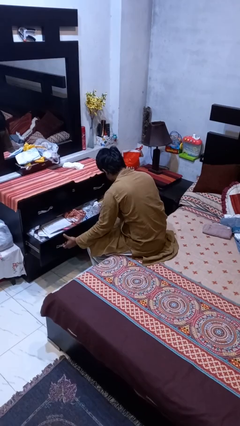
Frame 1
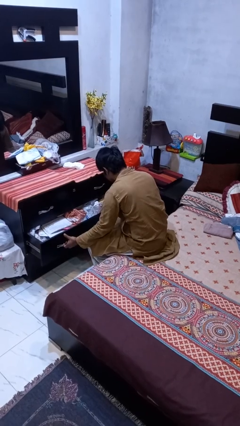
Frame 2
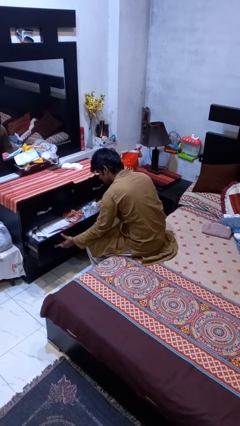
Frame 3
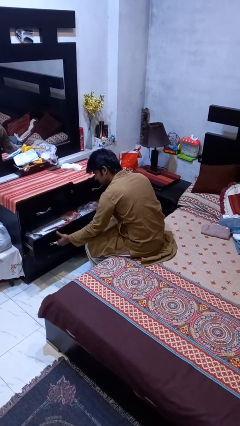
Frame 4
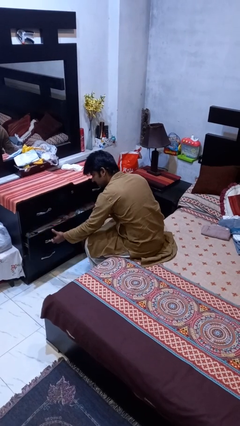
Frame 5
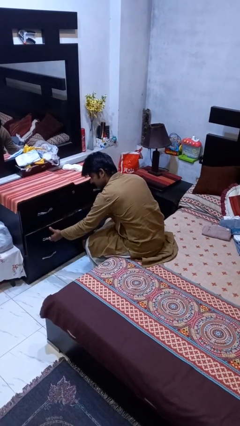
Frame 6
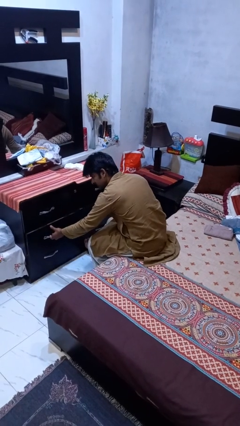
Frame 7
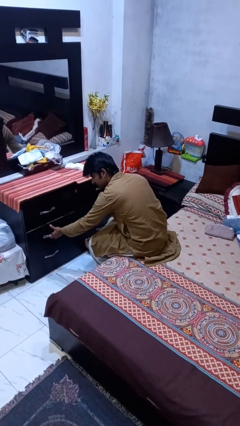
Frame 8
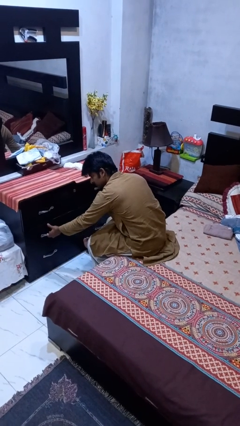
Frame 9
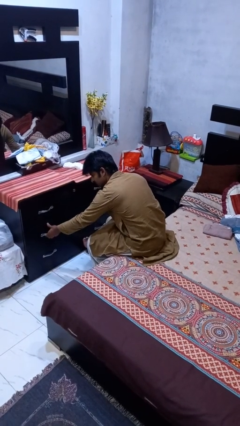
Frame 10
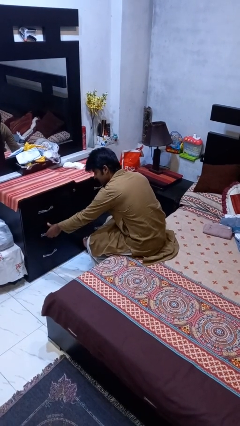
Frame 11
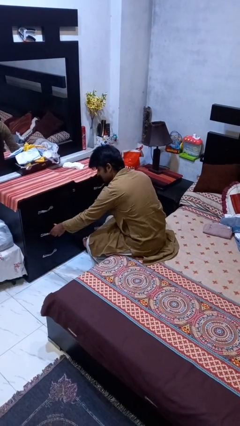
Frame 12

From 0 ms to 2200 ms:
person closes dresser drawer

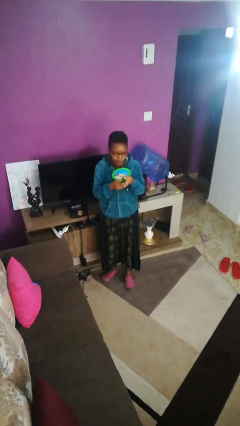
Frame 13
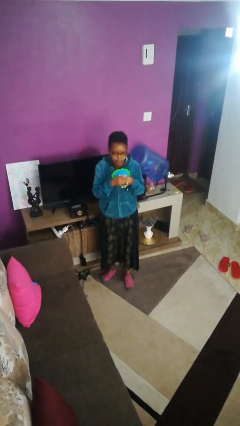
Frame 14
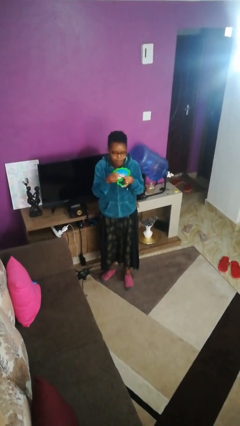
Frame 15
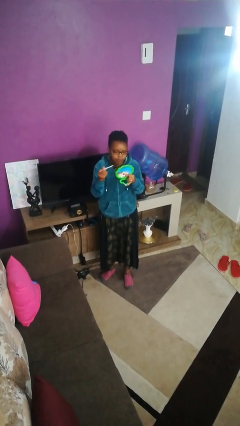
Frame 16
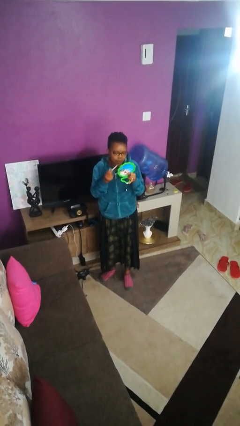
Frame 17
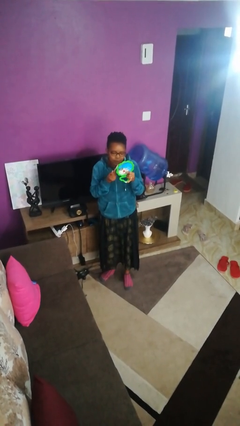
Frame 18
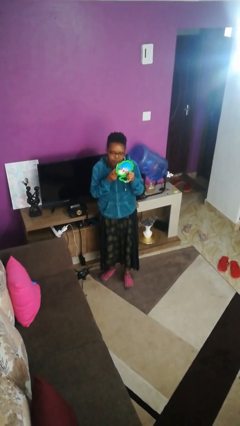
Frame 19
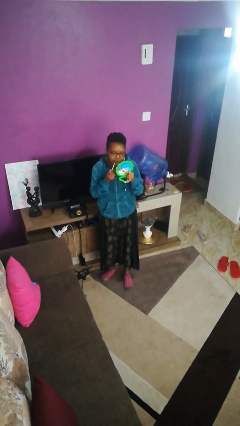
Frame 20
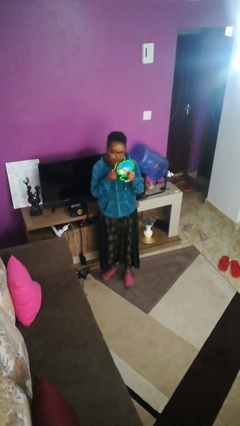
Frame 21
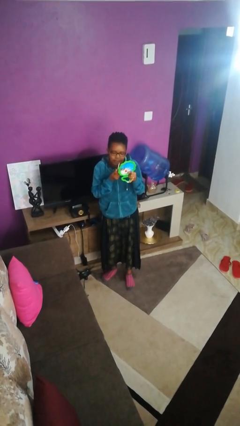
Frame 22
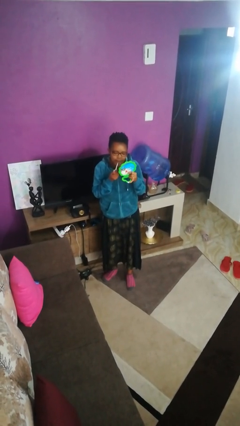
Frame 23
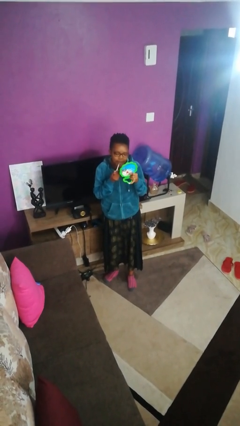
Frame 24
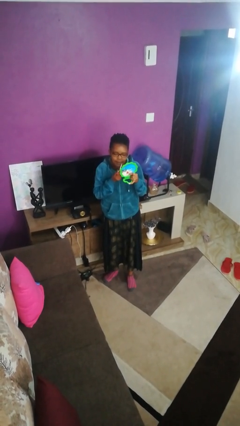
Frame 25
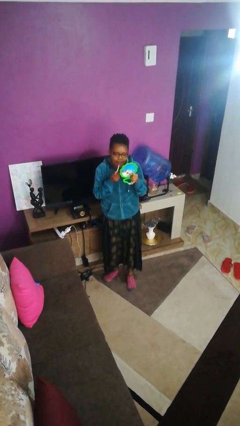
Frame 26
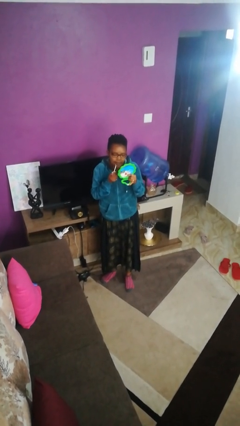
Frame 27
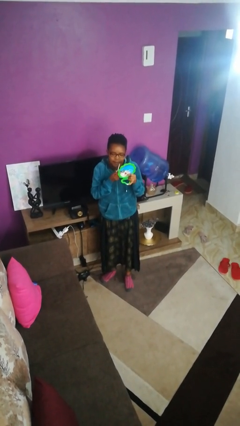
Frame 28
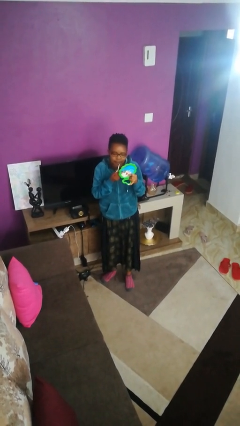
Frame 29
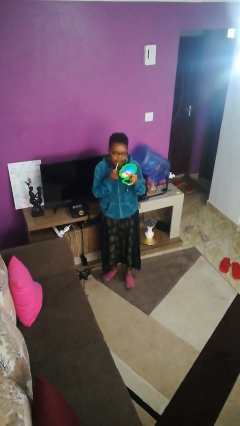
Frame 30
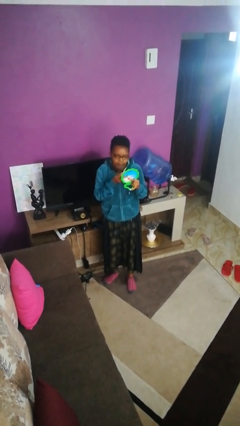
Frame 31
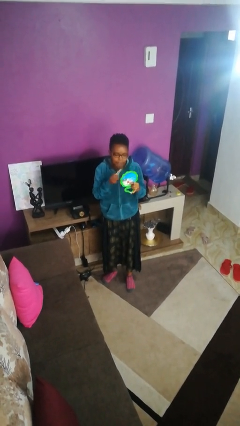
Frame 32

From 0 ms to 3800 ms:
person applies lip makeup

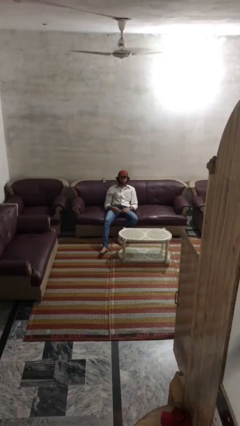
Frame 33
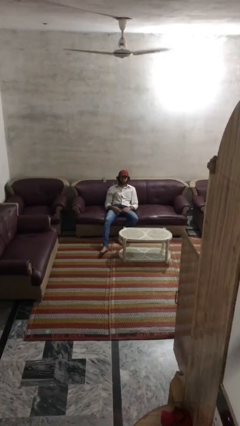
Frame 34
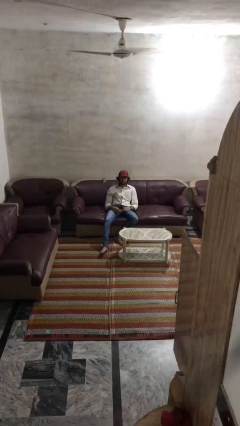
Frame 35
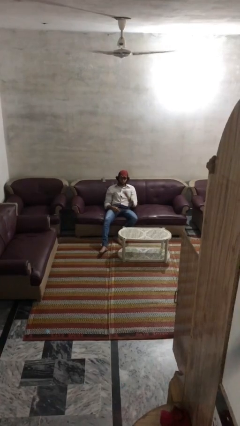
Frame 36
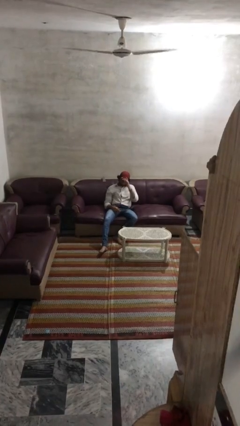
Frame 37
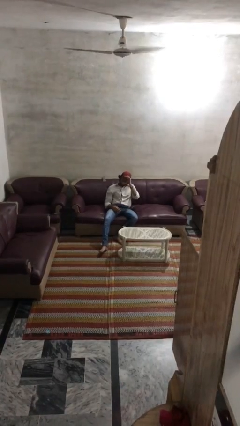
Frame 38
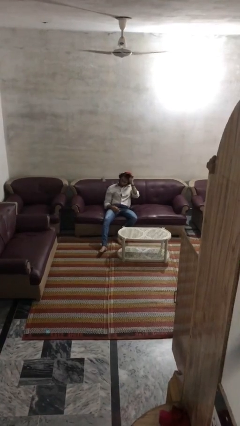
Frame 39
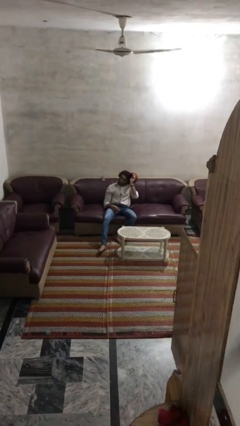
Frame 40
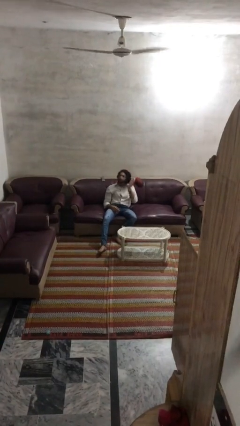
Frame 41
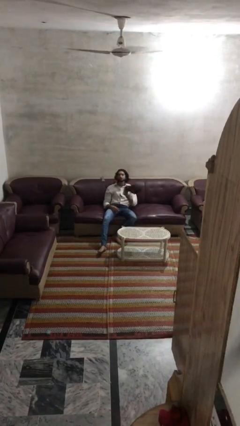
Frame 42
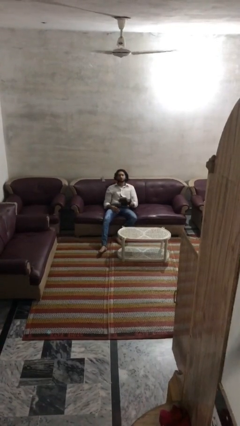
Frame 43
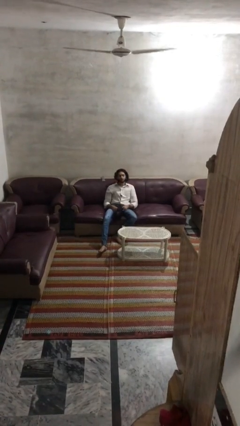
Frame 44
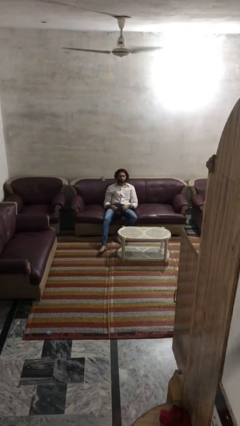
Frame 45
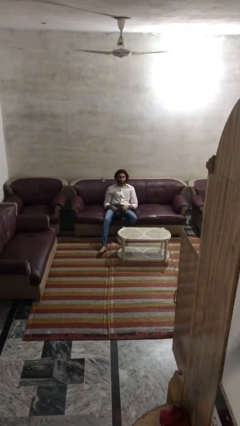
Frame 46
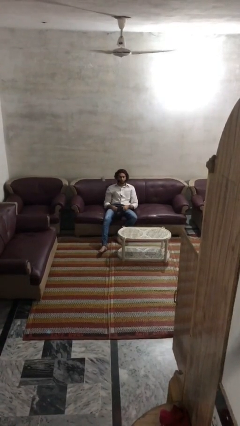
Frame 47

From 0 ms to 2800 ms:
person takes off hat

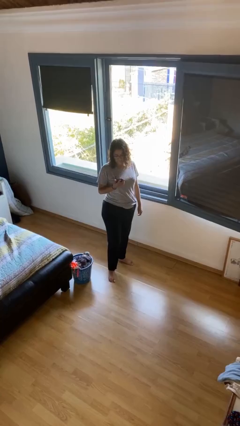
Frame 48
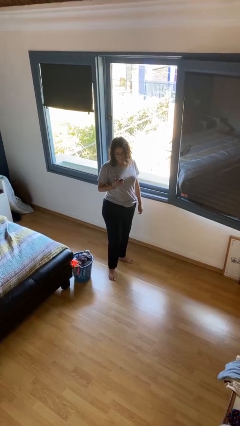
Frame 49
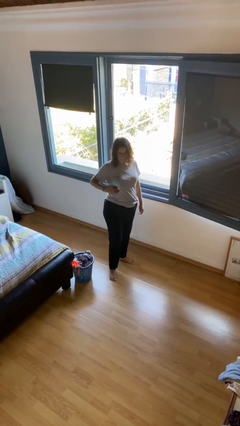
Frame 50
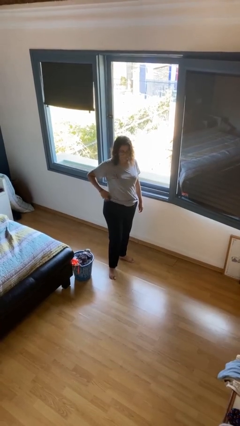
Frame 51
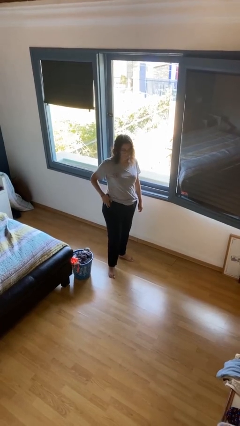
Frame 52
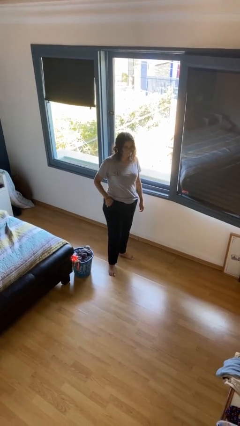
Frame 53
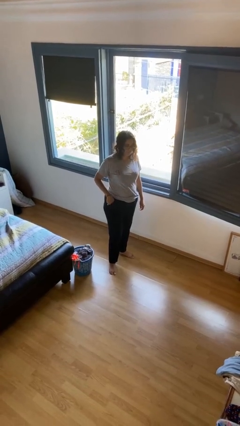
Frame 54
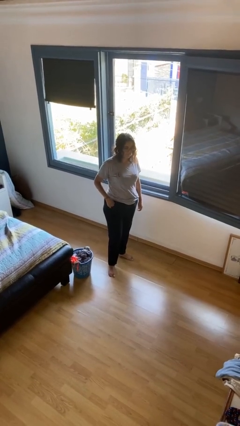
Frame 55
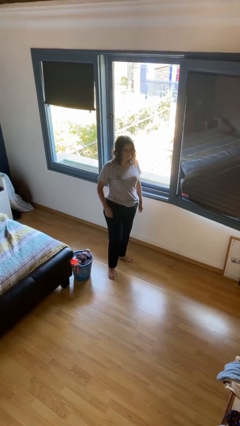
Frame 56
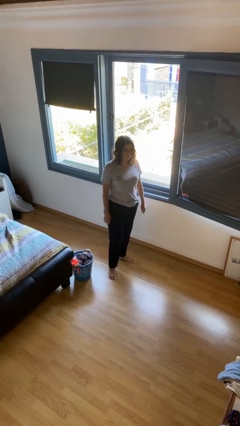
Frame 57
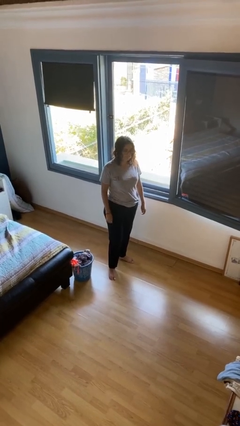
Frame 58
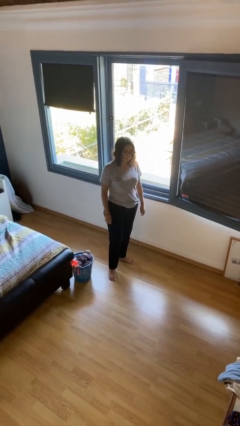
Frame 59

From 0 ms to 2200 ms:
person puts phone into pocket

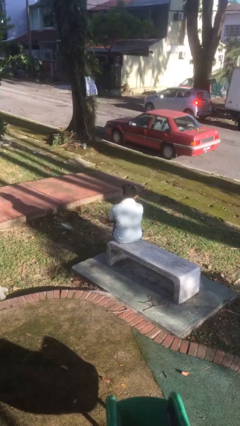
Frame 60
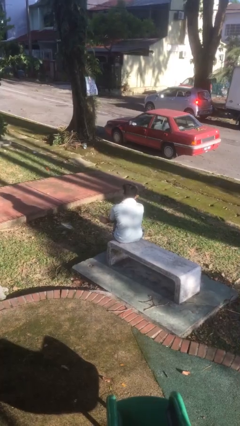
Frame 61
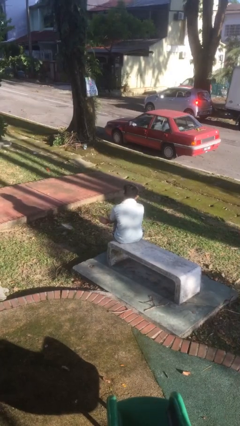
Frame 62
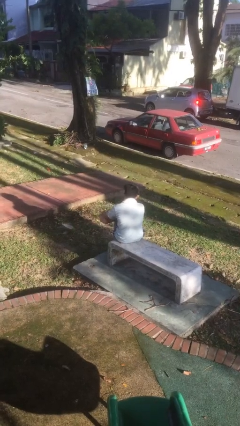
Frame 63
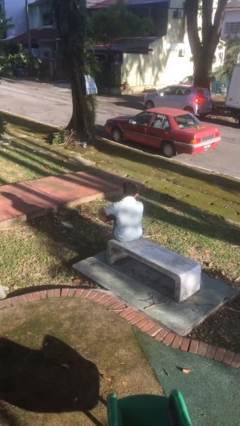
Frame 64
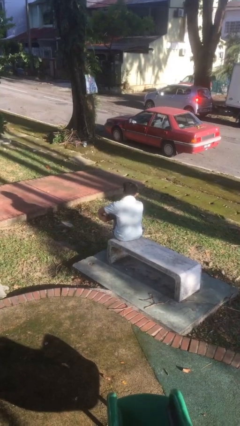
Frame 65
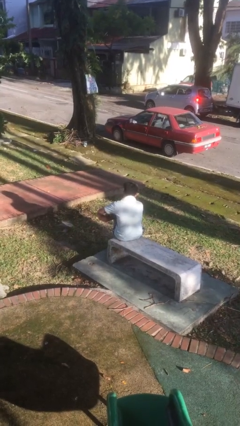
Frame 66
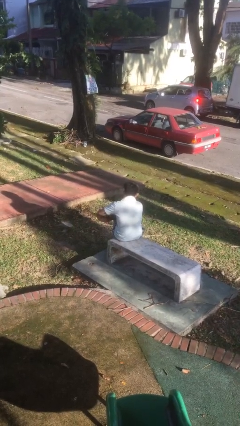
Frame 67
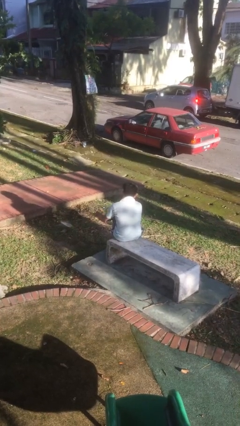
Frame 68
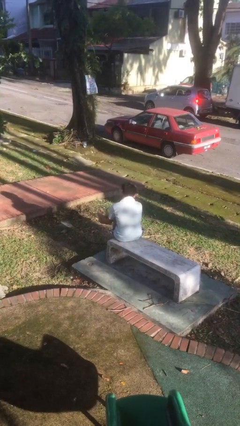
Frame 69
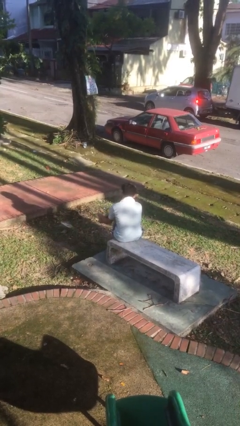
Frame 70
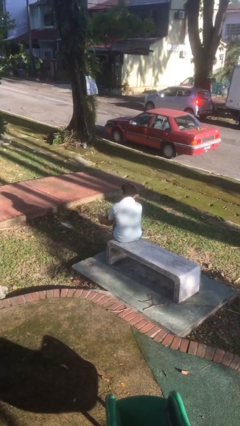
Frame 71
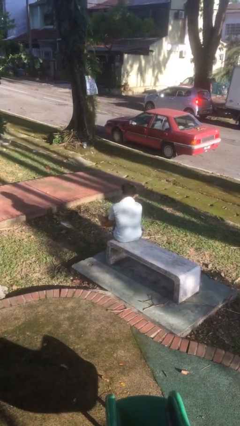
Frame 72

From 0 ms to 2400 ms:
person rubs foot

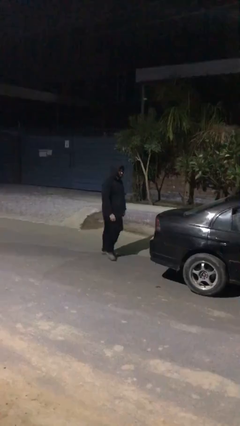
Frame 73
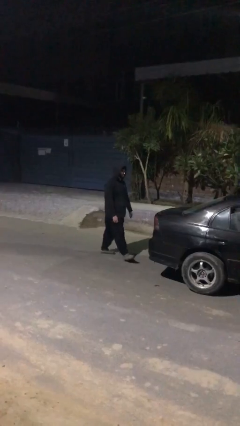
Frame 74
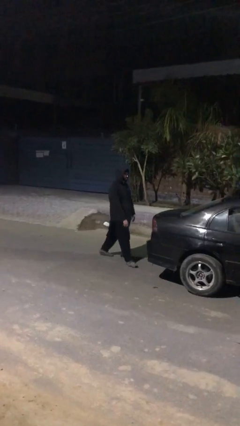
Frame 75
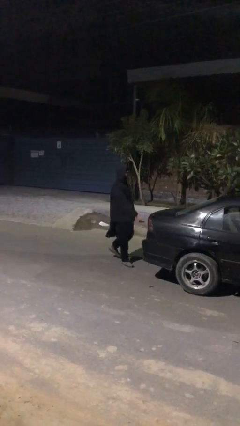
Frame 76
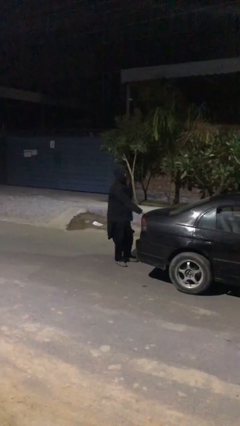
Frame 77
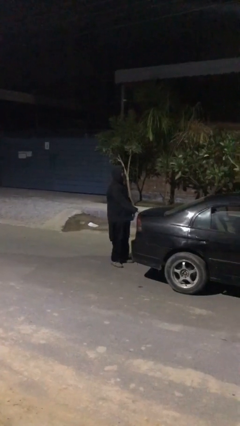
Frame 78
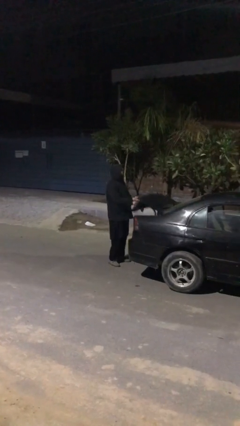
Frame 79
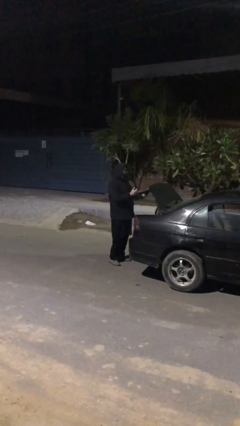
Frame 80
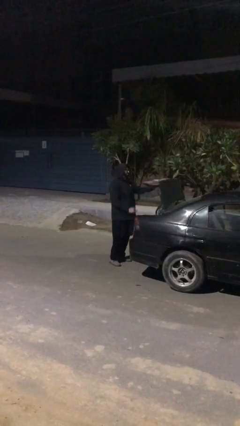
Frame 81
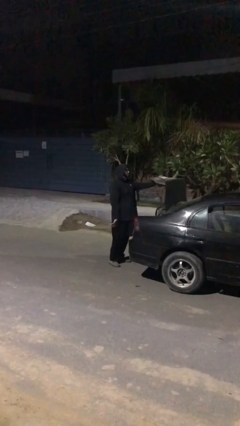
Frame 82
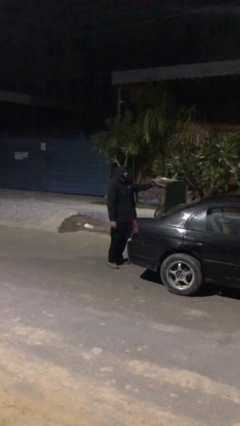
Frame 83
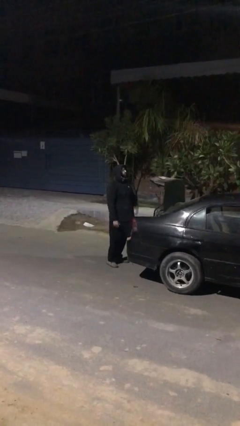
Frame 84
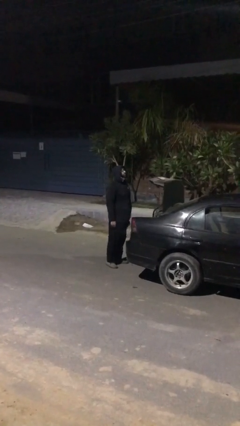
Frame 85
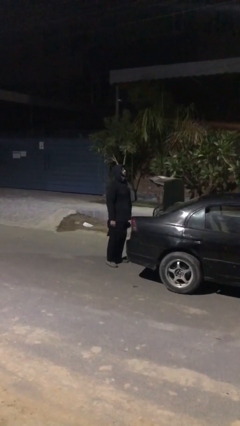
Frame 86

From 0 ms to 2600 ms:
person opens car trunk

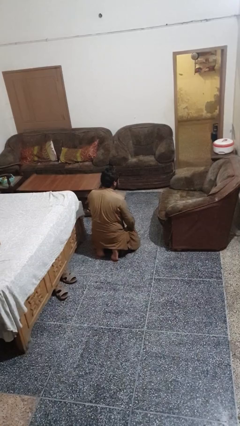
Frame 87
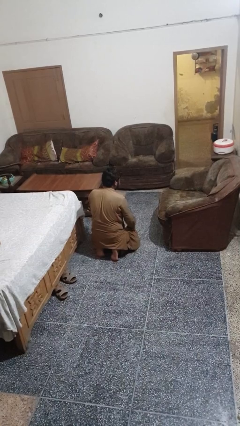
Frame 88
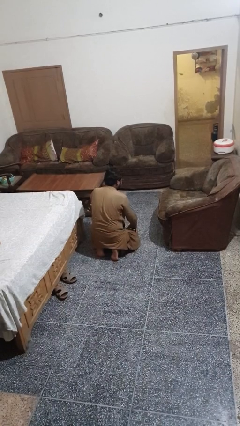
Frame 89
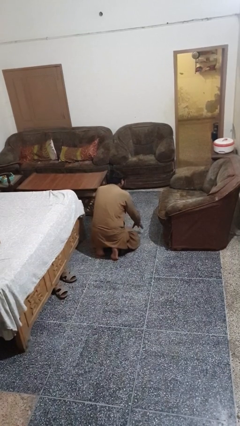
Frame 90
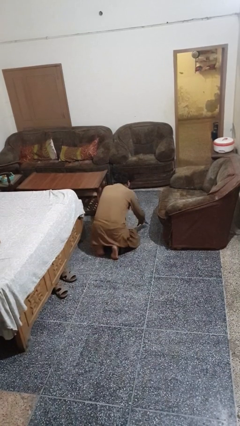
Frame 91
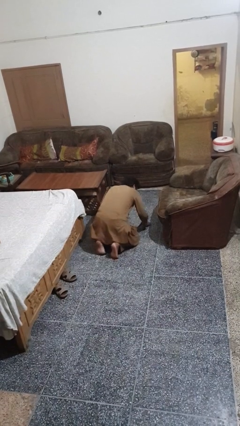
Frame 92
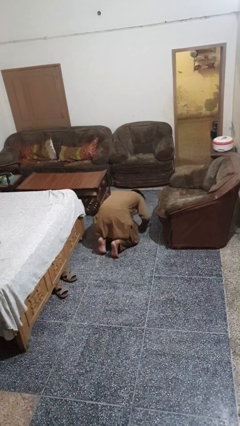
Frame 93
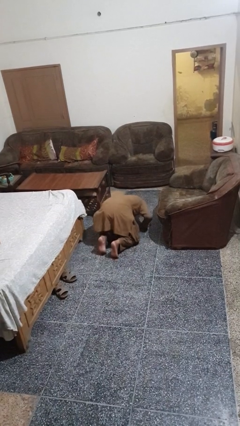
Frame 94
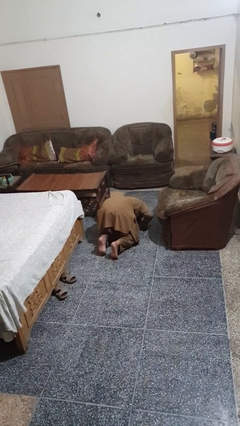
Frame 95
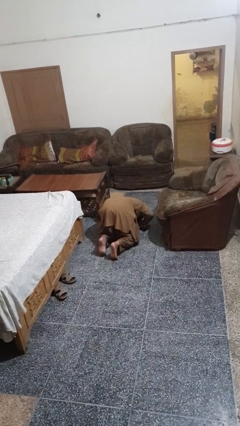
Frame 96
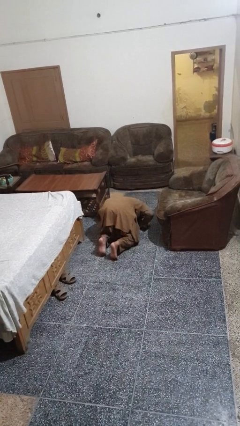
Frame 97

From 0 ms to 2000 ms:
person searches under couch
